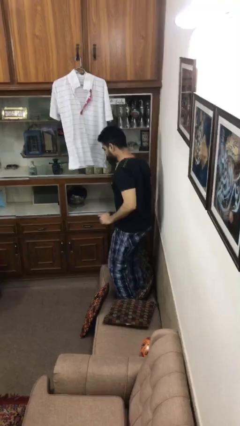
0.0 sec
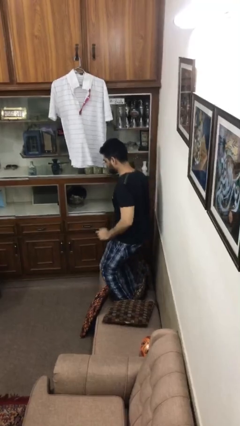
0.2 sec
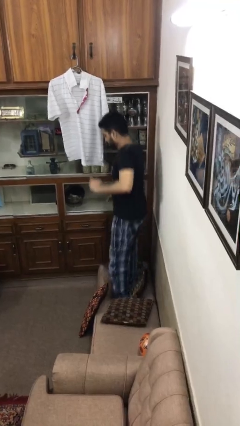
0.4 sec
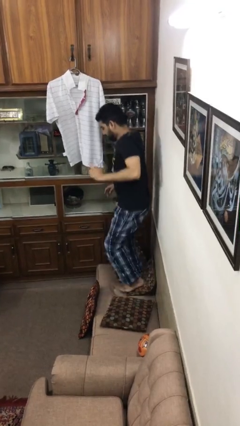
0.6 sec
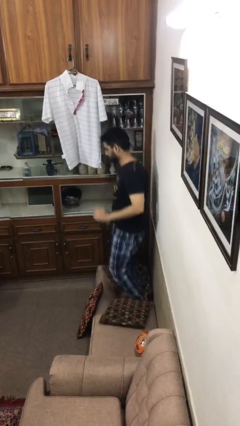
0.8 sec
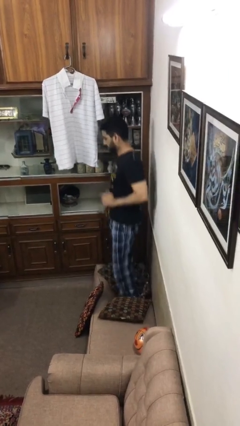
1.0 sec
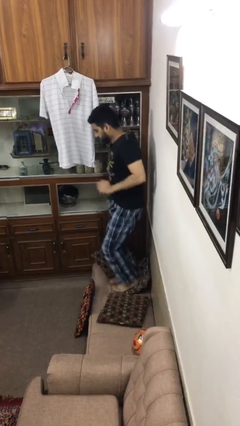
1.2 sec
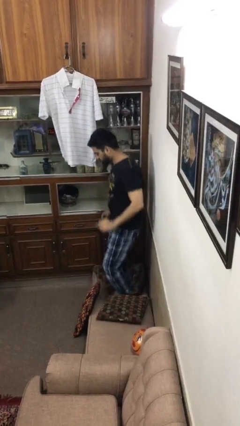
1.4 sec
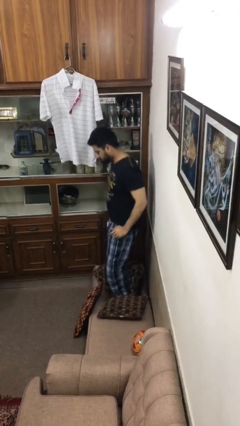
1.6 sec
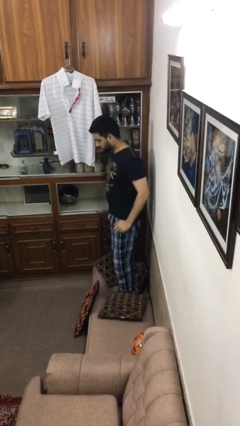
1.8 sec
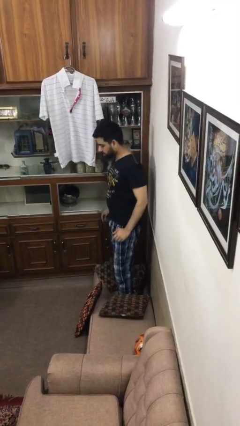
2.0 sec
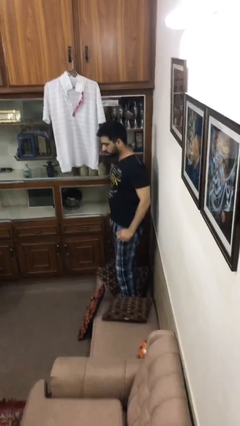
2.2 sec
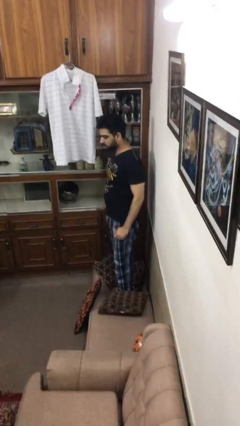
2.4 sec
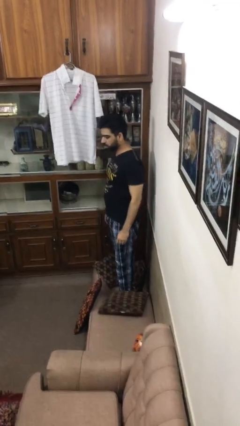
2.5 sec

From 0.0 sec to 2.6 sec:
person jumps on couch

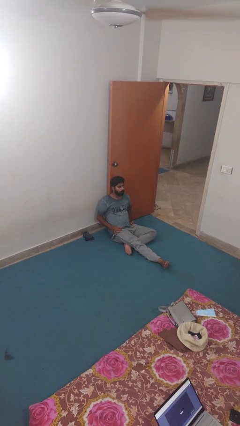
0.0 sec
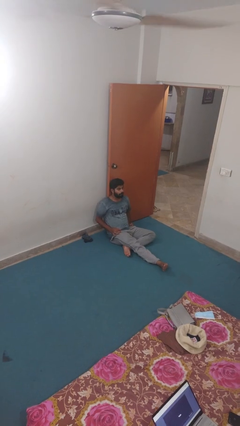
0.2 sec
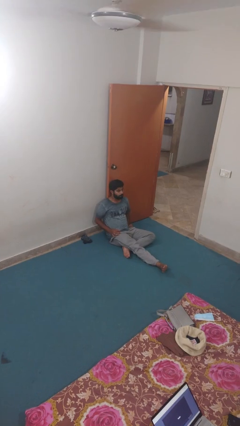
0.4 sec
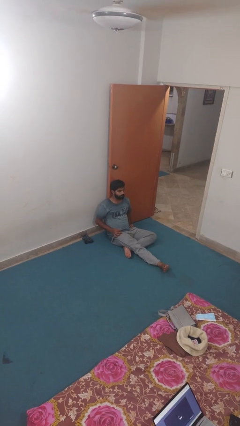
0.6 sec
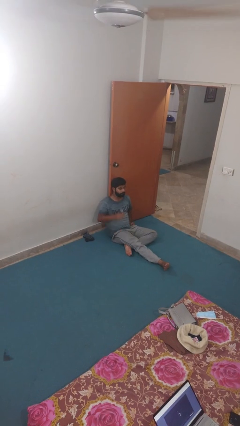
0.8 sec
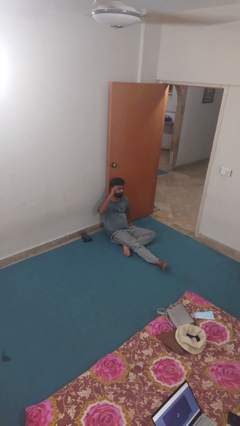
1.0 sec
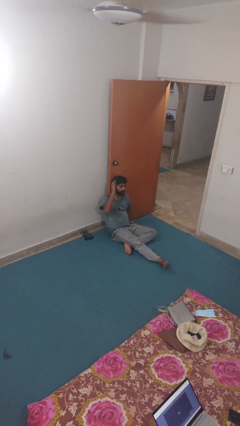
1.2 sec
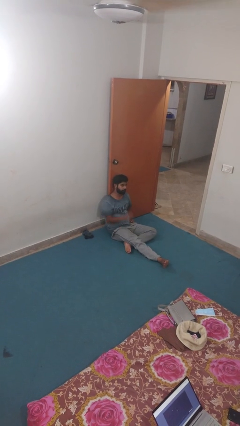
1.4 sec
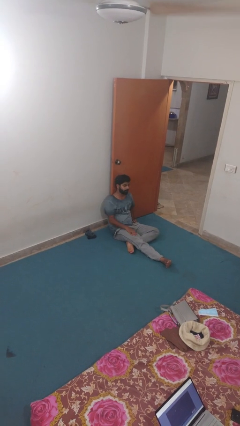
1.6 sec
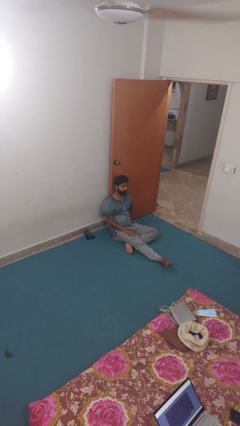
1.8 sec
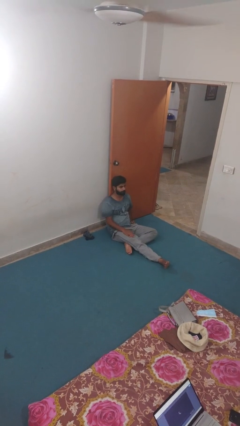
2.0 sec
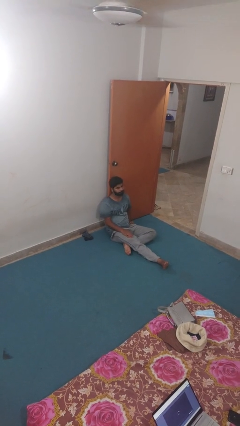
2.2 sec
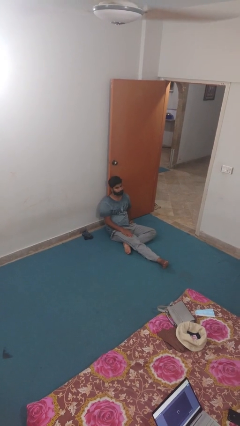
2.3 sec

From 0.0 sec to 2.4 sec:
person slaps hands on thighs

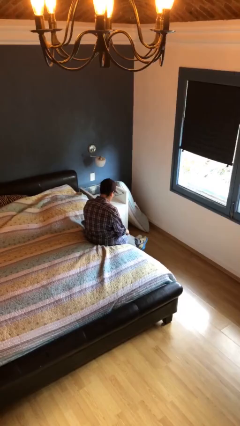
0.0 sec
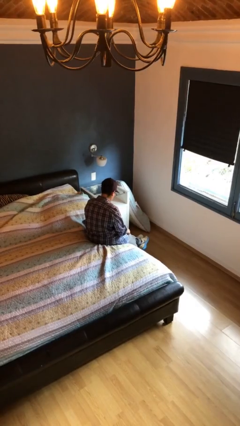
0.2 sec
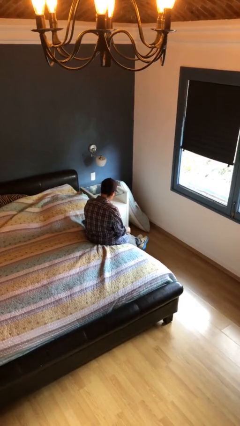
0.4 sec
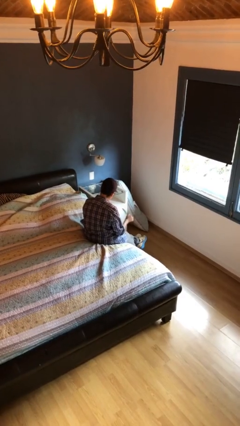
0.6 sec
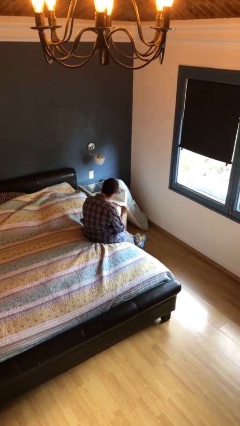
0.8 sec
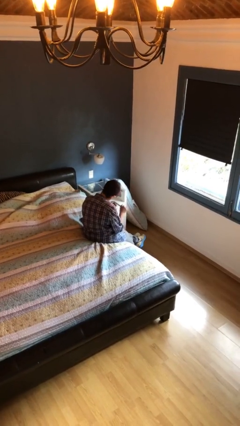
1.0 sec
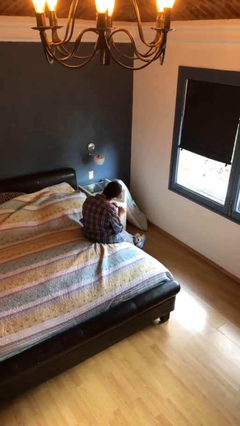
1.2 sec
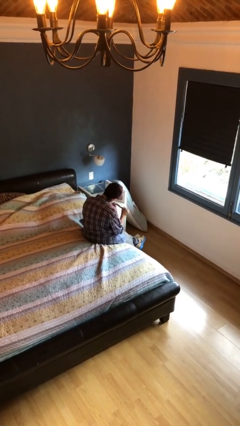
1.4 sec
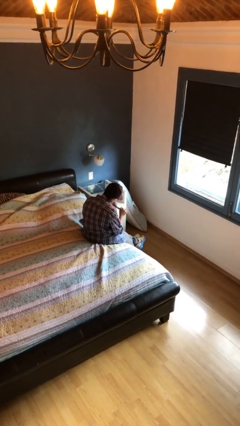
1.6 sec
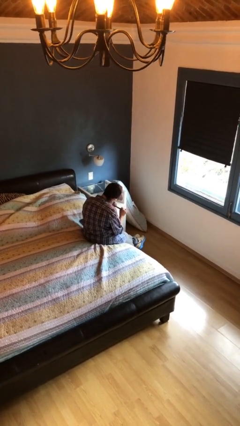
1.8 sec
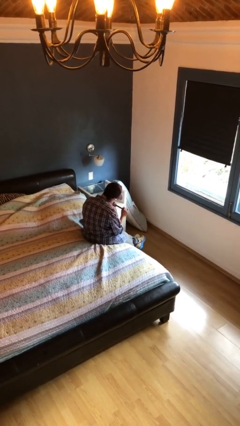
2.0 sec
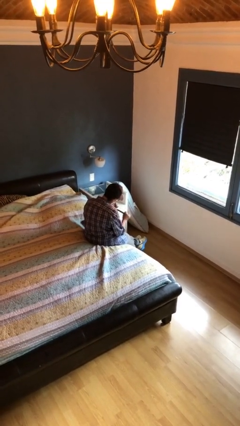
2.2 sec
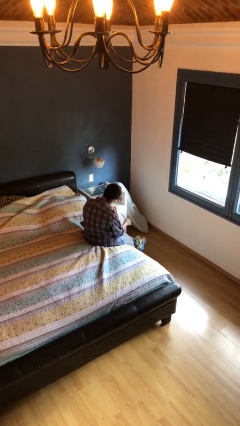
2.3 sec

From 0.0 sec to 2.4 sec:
person files fingernails

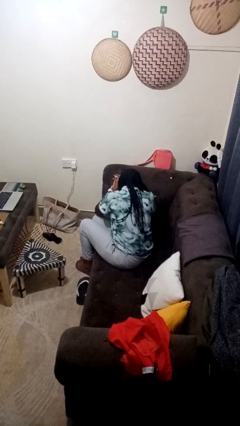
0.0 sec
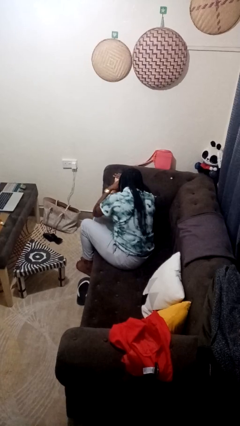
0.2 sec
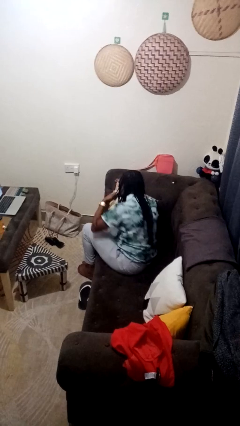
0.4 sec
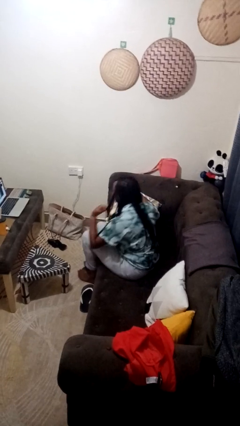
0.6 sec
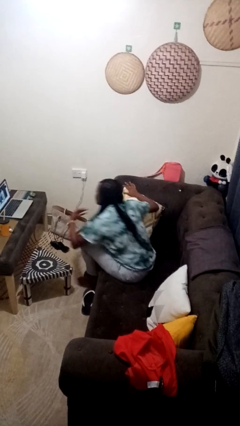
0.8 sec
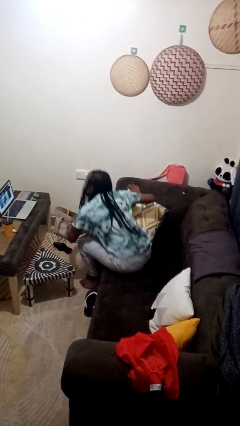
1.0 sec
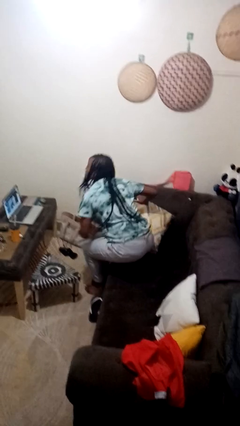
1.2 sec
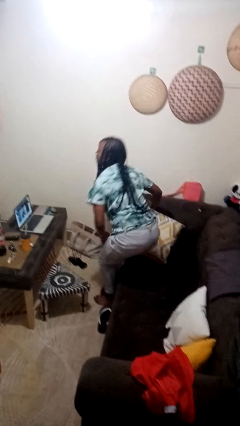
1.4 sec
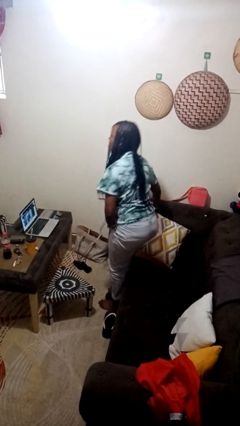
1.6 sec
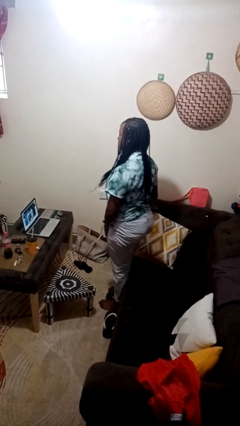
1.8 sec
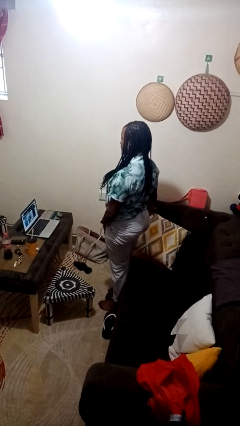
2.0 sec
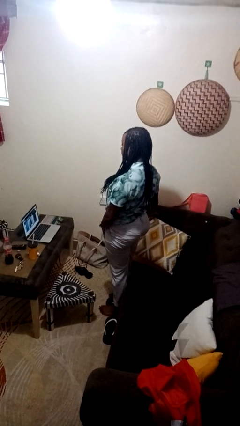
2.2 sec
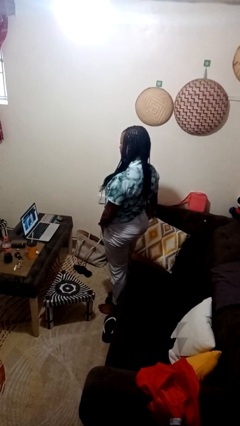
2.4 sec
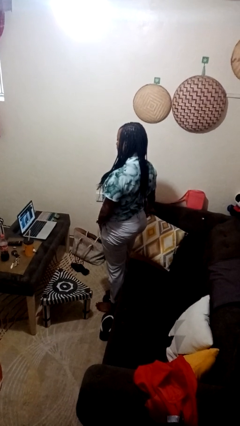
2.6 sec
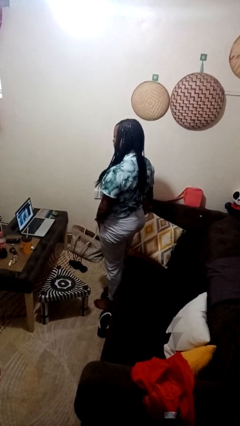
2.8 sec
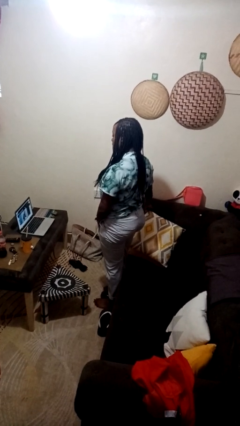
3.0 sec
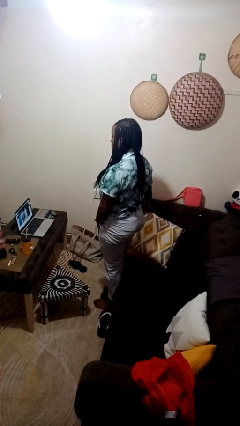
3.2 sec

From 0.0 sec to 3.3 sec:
person stands up

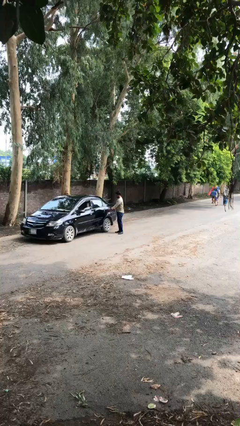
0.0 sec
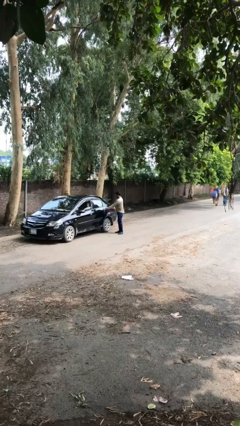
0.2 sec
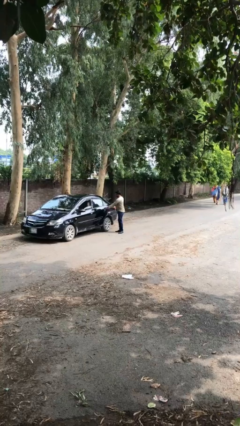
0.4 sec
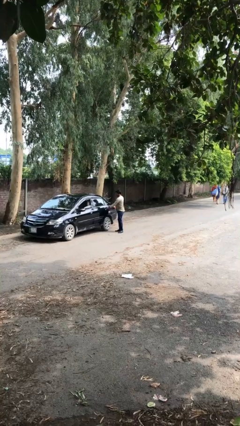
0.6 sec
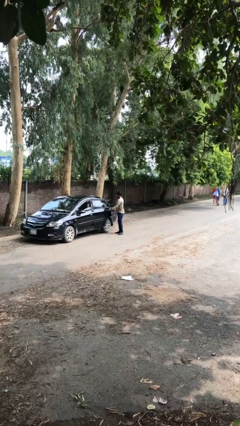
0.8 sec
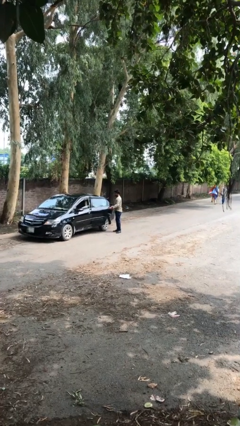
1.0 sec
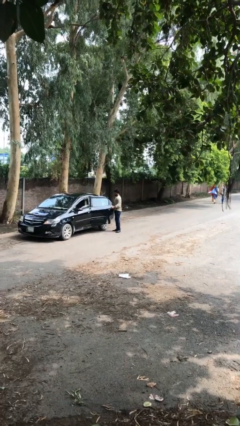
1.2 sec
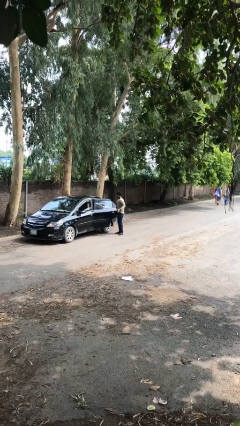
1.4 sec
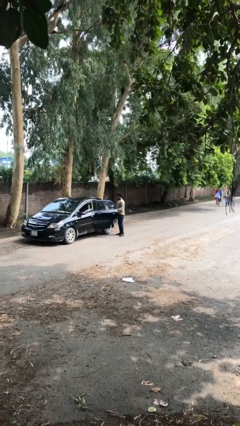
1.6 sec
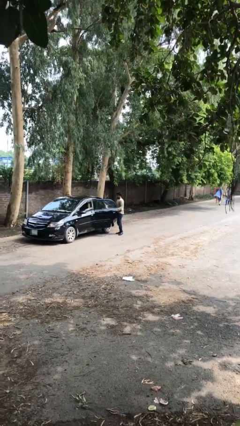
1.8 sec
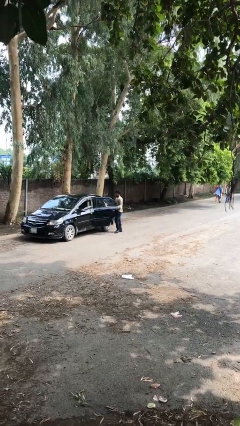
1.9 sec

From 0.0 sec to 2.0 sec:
person opens car door

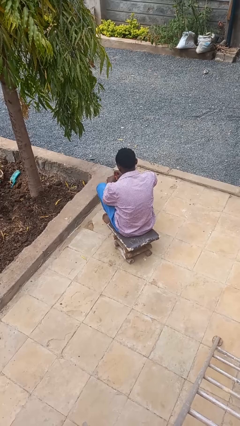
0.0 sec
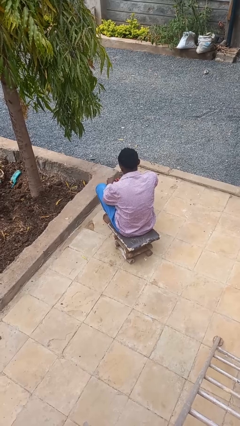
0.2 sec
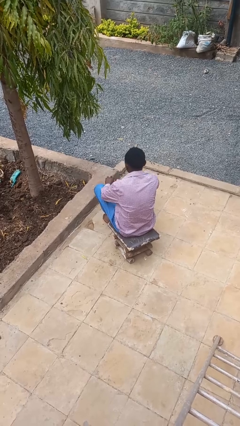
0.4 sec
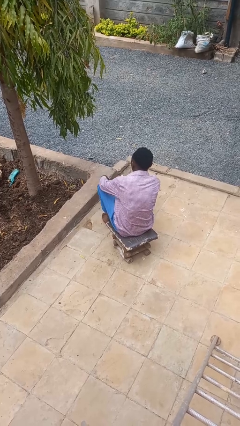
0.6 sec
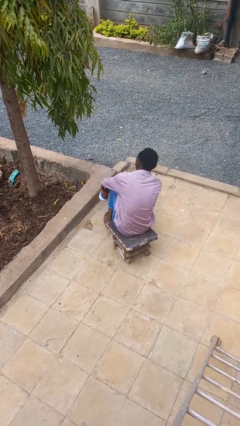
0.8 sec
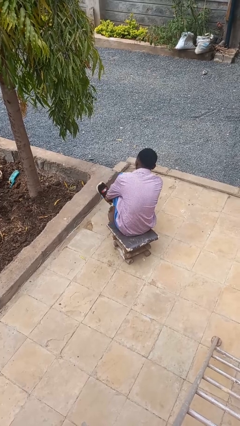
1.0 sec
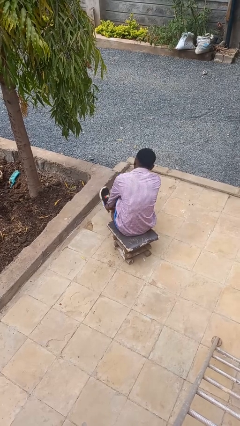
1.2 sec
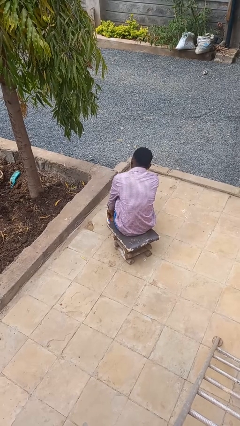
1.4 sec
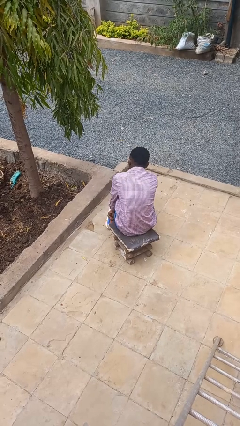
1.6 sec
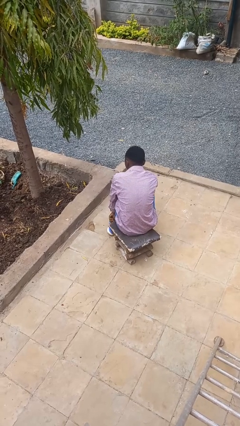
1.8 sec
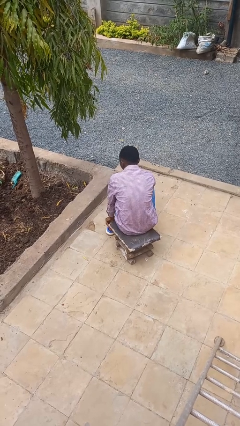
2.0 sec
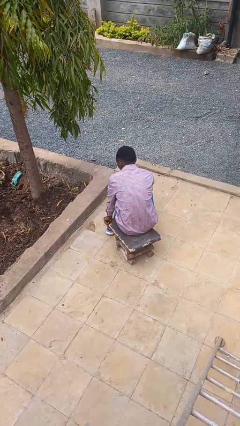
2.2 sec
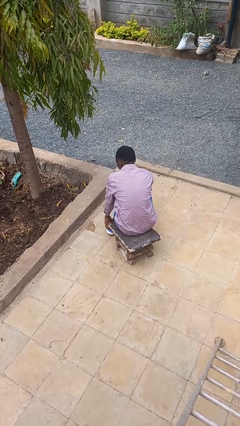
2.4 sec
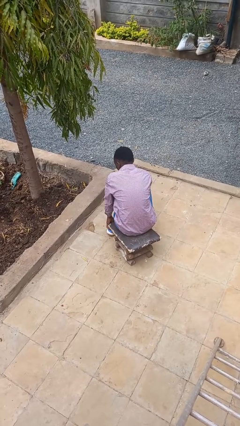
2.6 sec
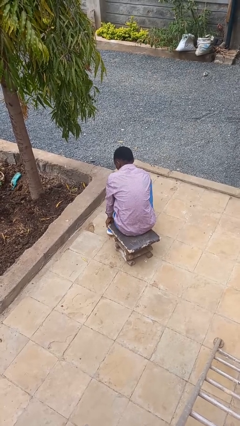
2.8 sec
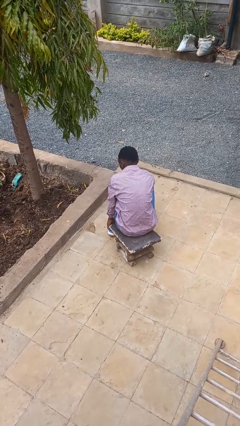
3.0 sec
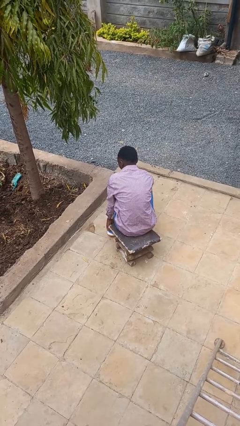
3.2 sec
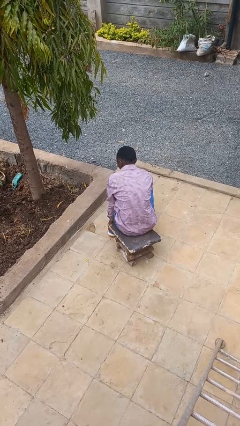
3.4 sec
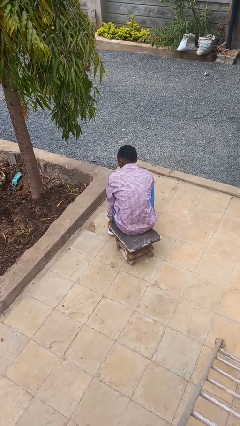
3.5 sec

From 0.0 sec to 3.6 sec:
person puts on shoes

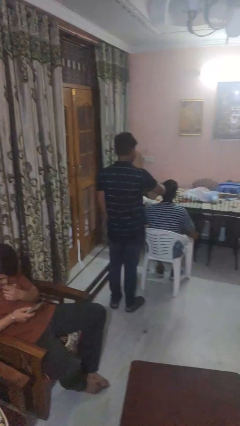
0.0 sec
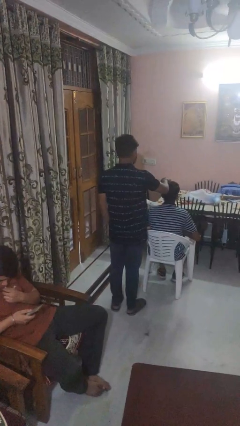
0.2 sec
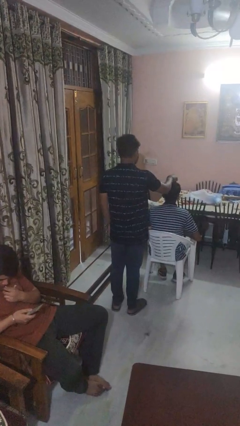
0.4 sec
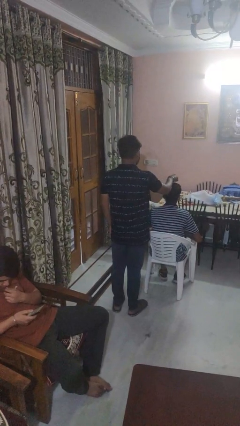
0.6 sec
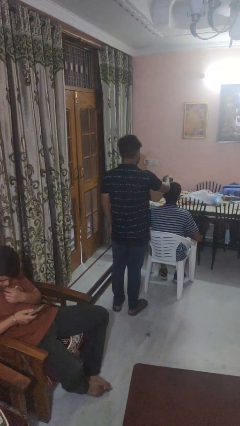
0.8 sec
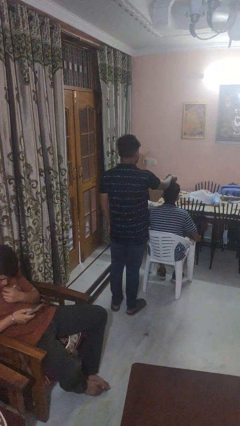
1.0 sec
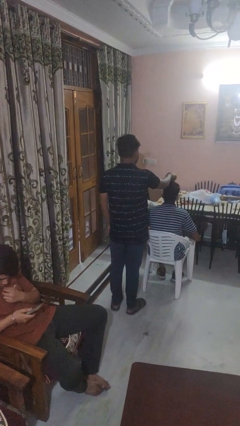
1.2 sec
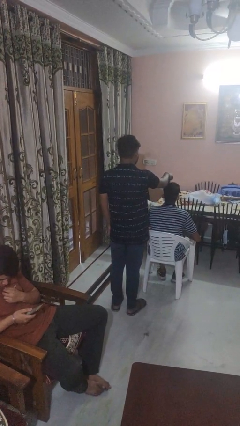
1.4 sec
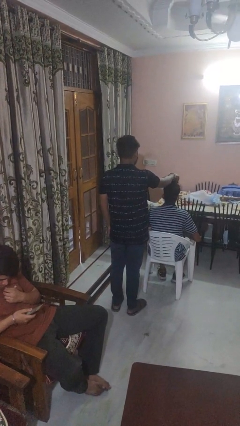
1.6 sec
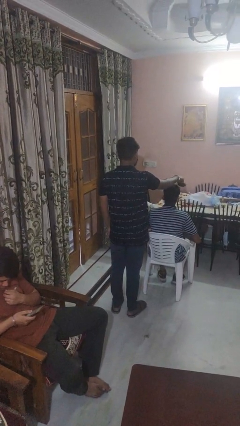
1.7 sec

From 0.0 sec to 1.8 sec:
person brushes hair of person
